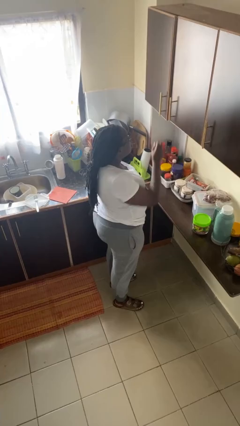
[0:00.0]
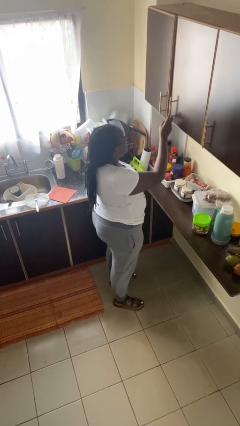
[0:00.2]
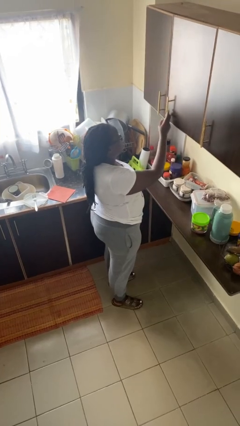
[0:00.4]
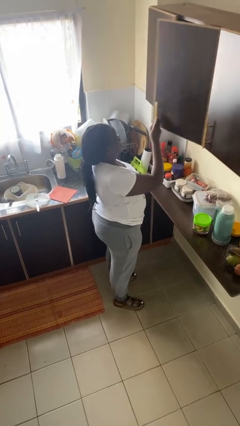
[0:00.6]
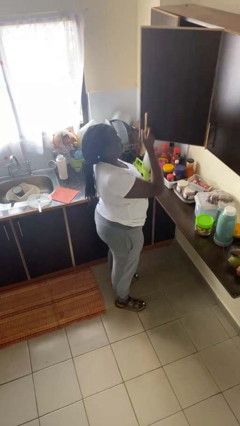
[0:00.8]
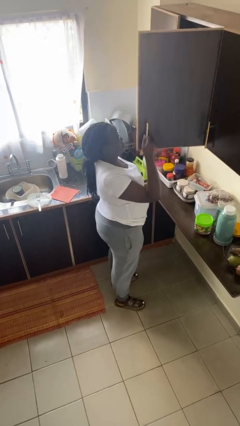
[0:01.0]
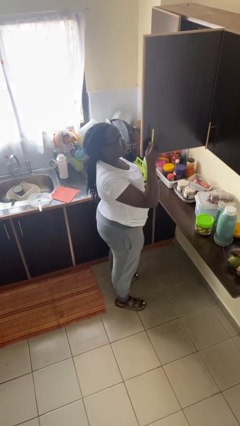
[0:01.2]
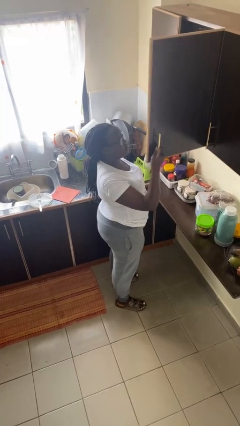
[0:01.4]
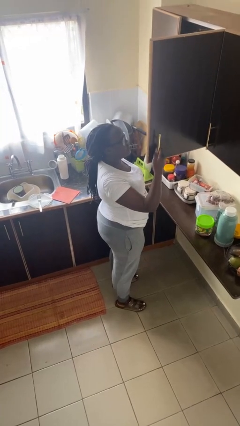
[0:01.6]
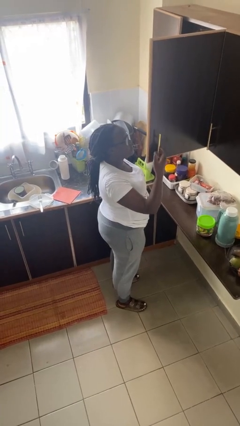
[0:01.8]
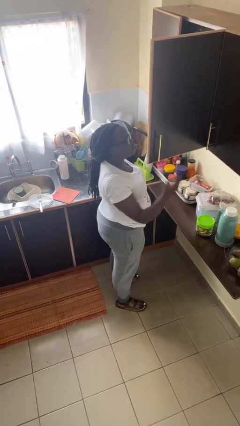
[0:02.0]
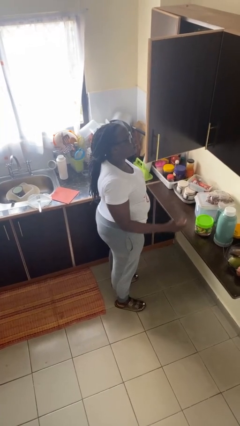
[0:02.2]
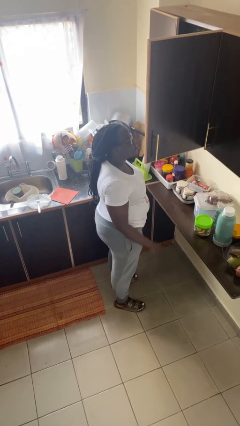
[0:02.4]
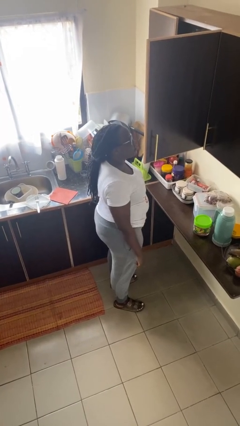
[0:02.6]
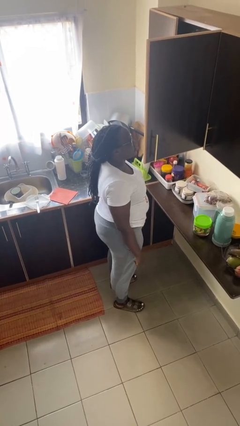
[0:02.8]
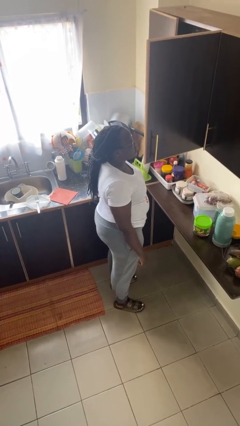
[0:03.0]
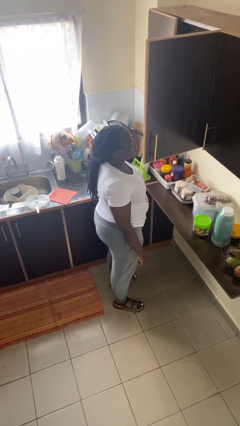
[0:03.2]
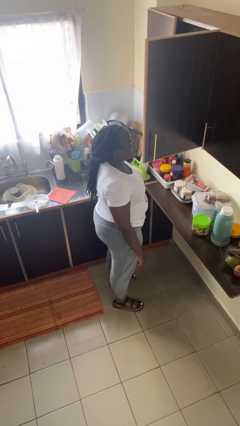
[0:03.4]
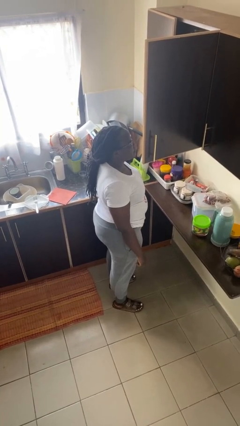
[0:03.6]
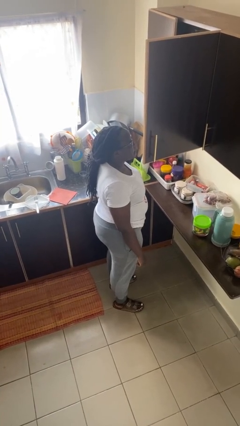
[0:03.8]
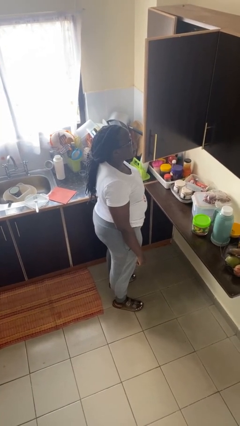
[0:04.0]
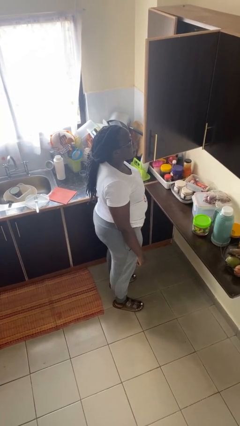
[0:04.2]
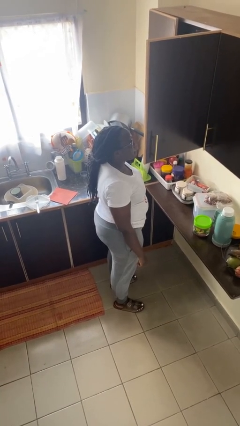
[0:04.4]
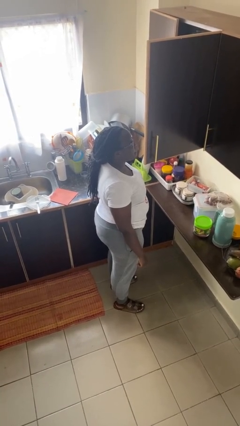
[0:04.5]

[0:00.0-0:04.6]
person opens cabinet

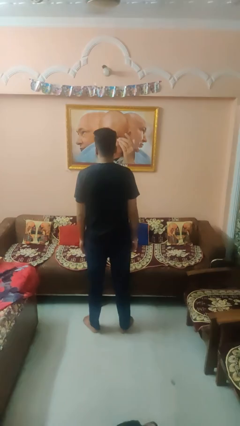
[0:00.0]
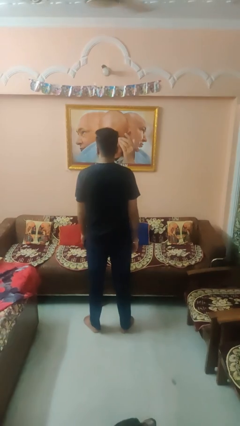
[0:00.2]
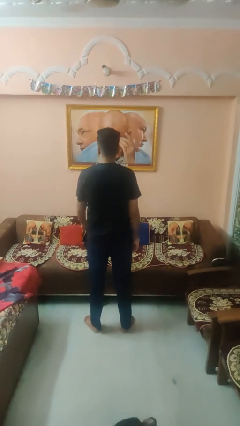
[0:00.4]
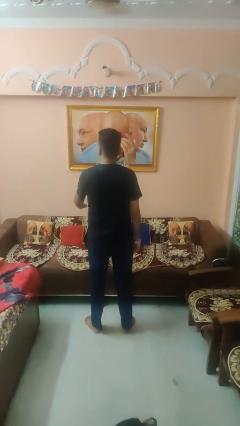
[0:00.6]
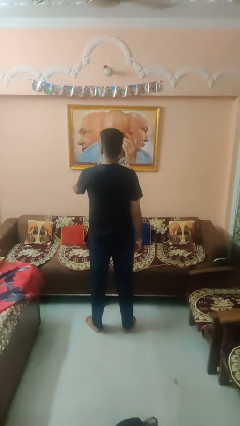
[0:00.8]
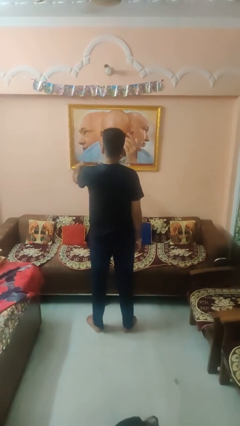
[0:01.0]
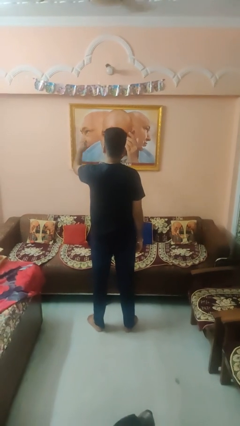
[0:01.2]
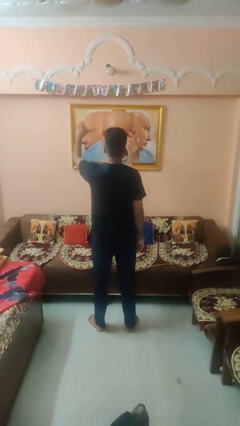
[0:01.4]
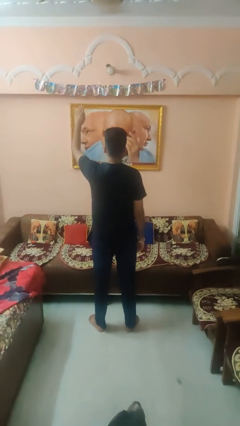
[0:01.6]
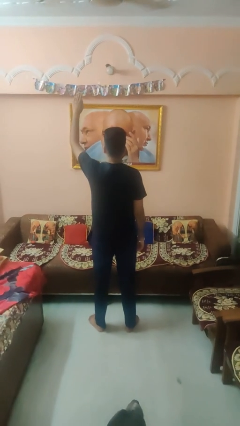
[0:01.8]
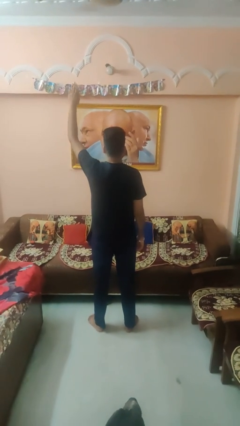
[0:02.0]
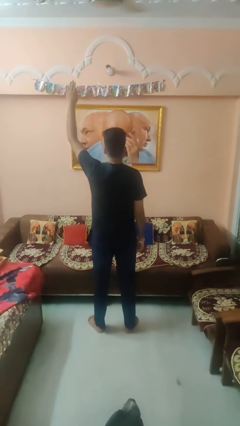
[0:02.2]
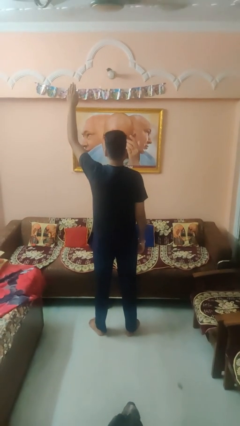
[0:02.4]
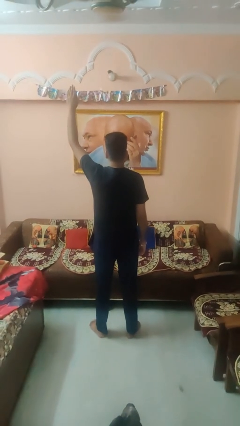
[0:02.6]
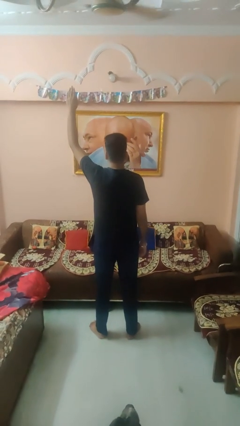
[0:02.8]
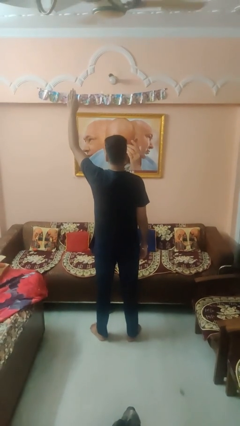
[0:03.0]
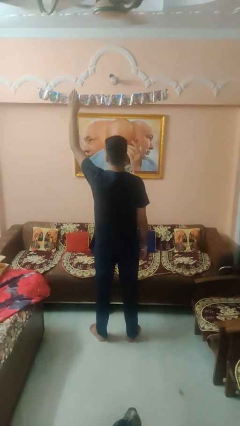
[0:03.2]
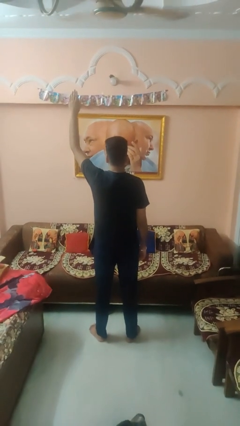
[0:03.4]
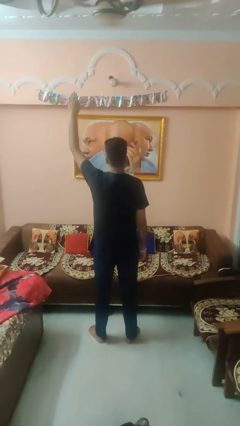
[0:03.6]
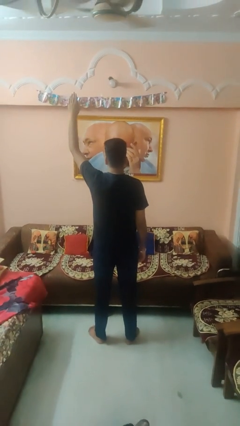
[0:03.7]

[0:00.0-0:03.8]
person gestures raise hand

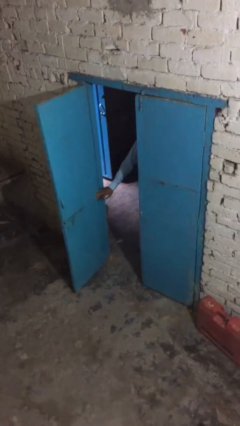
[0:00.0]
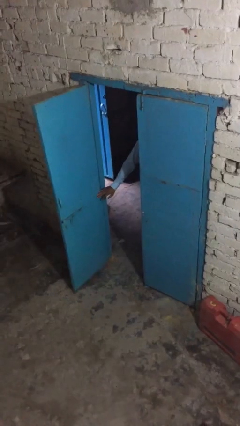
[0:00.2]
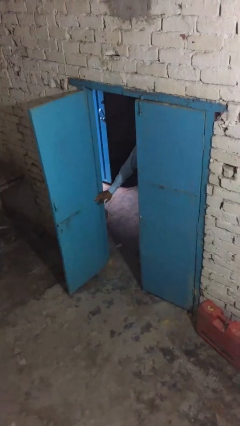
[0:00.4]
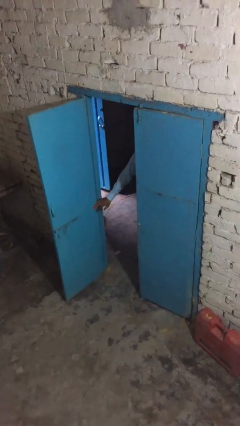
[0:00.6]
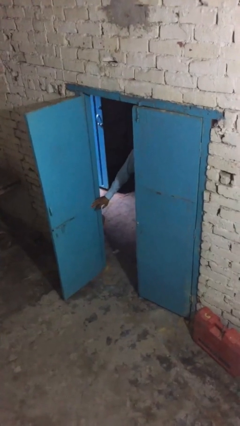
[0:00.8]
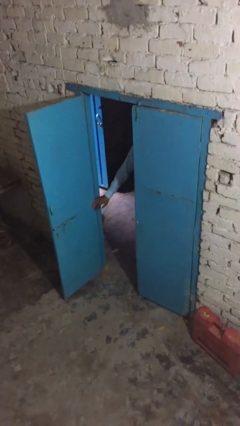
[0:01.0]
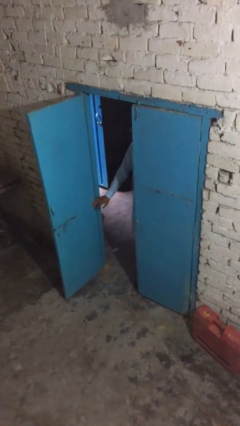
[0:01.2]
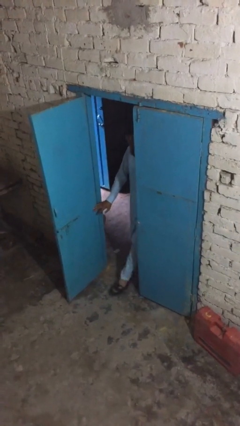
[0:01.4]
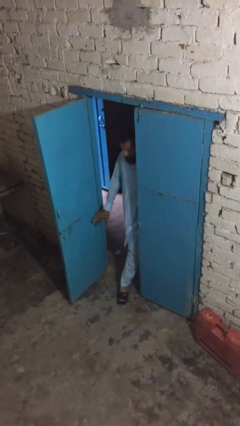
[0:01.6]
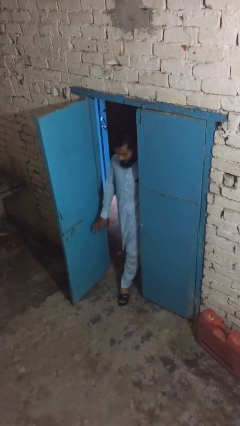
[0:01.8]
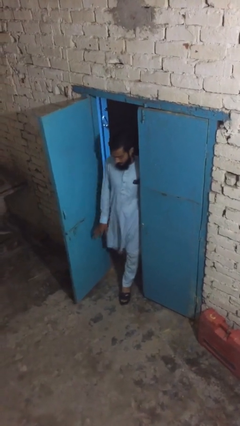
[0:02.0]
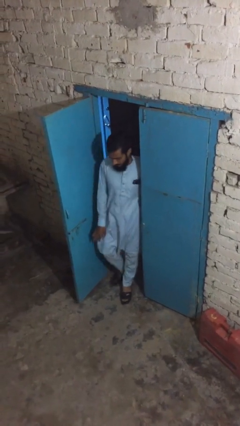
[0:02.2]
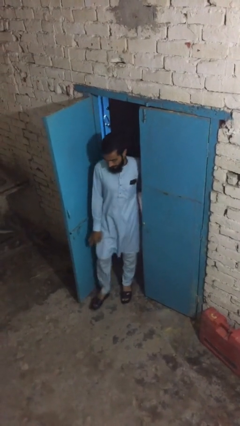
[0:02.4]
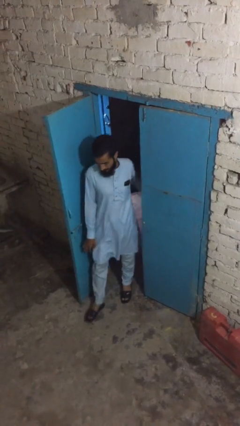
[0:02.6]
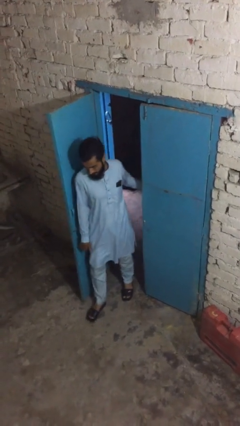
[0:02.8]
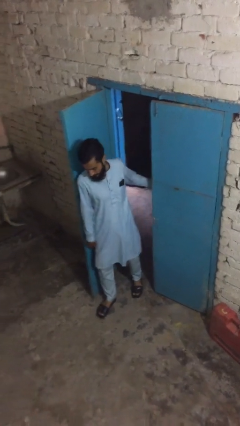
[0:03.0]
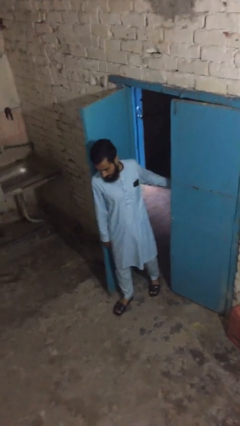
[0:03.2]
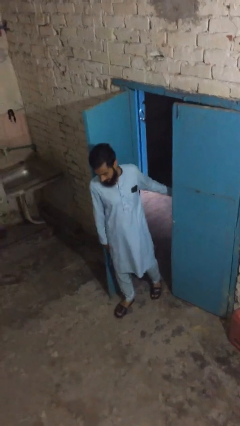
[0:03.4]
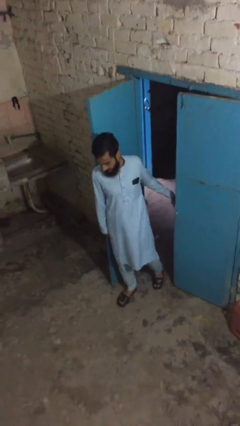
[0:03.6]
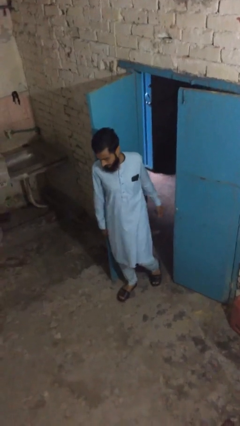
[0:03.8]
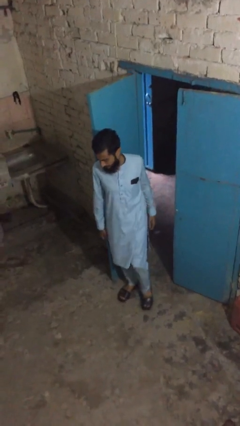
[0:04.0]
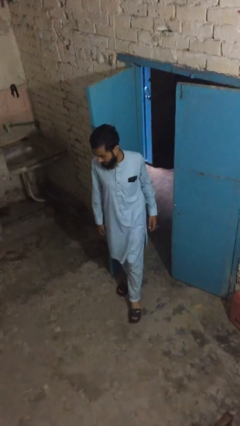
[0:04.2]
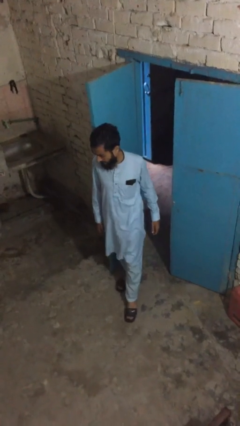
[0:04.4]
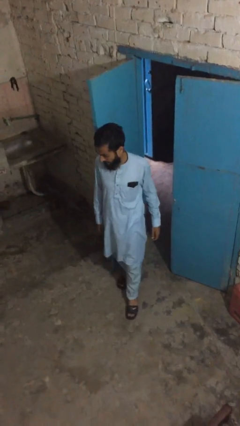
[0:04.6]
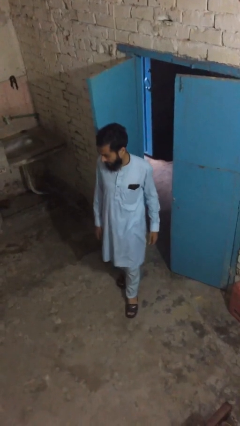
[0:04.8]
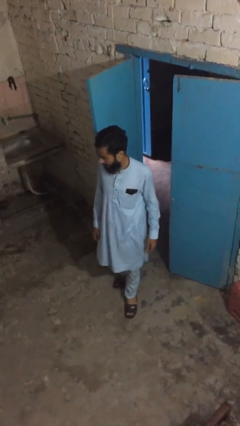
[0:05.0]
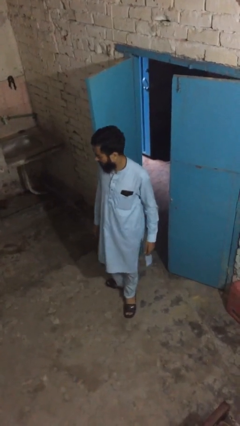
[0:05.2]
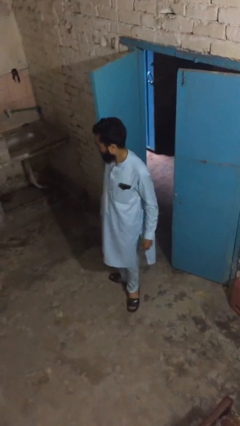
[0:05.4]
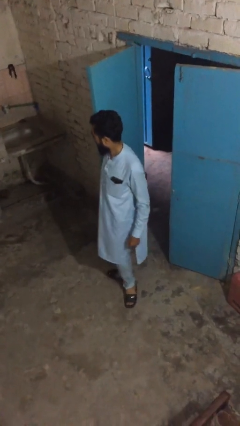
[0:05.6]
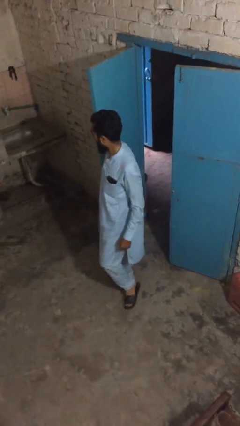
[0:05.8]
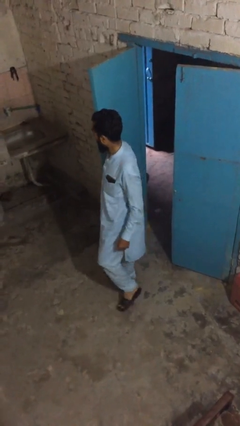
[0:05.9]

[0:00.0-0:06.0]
person enters scene through structure

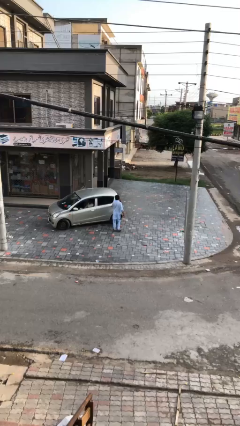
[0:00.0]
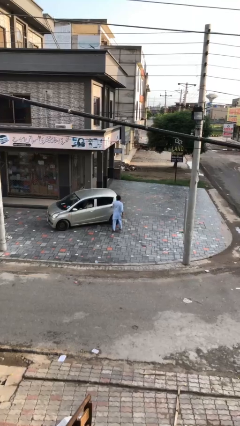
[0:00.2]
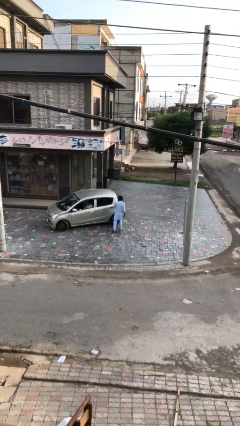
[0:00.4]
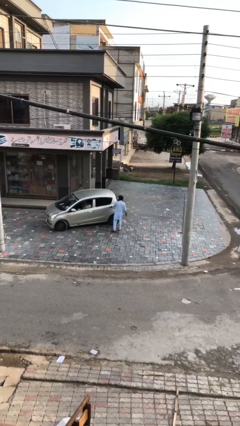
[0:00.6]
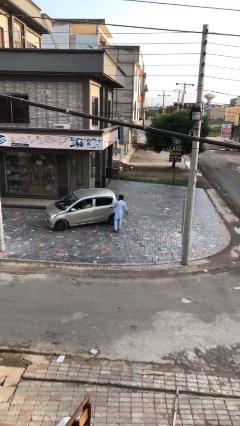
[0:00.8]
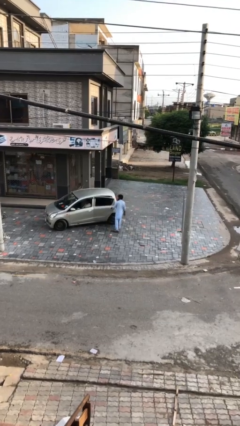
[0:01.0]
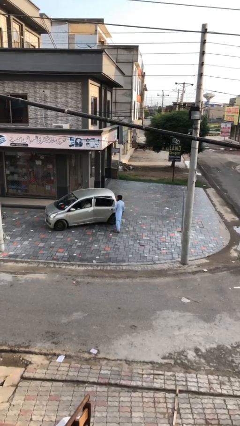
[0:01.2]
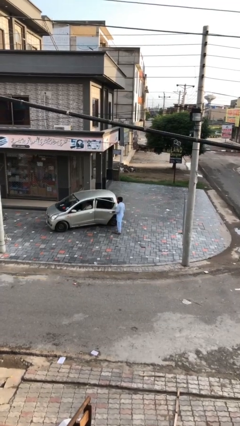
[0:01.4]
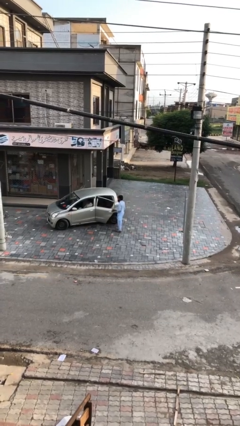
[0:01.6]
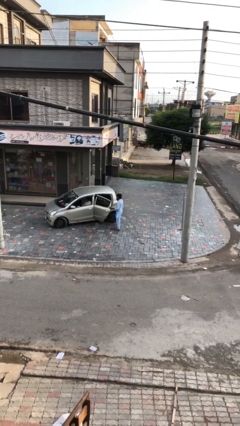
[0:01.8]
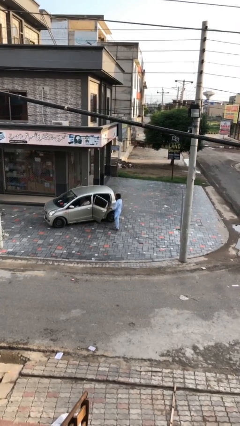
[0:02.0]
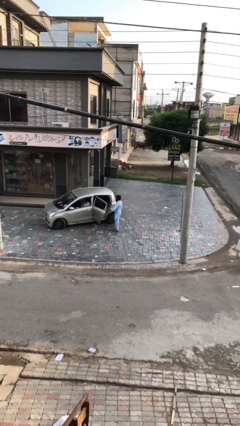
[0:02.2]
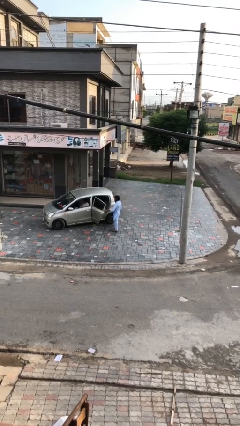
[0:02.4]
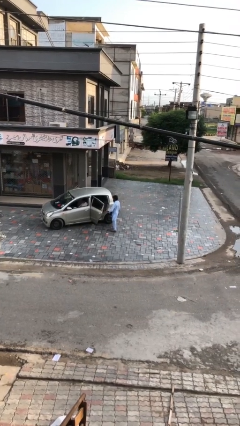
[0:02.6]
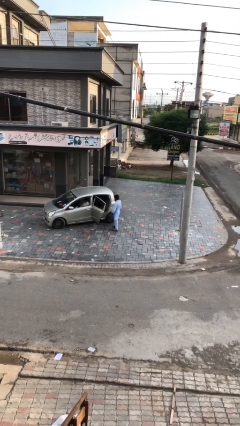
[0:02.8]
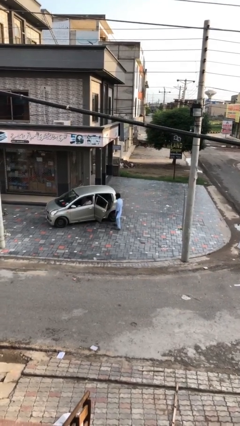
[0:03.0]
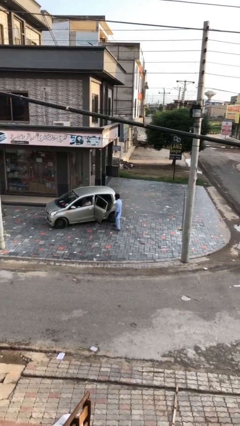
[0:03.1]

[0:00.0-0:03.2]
person opens car door
